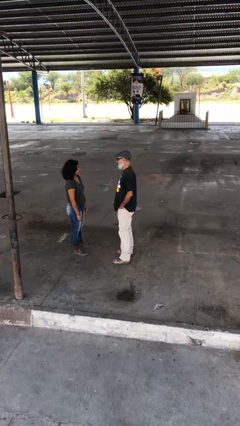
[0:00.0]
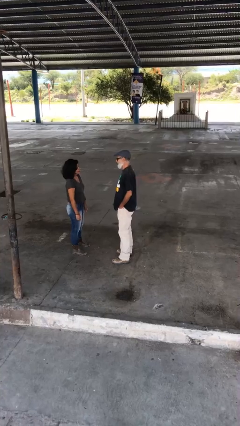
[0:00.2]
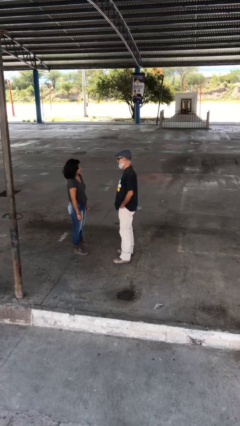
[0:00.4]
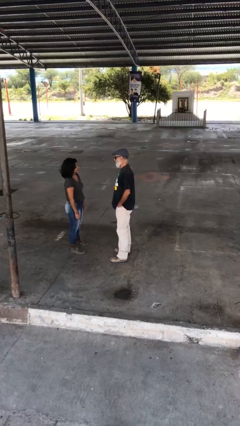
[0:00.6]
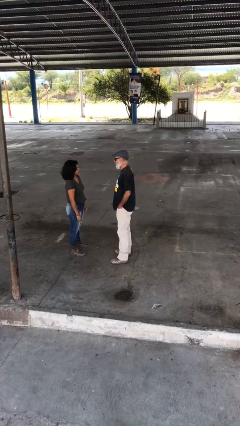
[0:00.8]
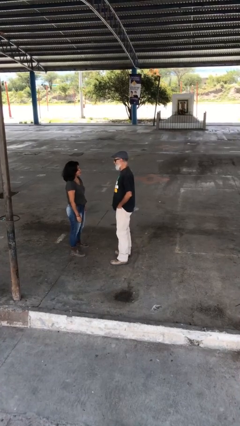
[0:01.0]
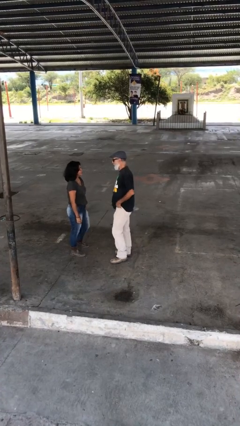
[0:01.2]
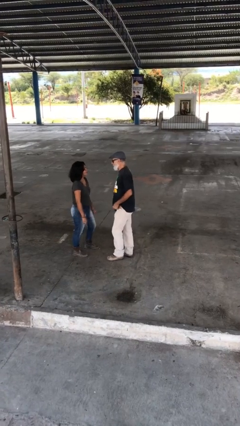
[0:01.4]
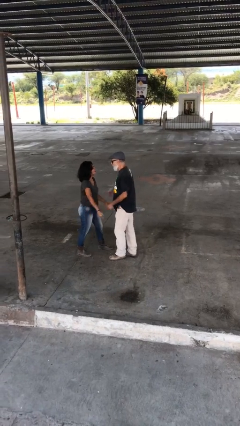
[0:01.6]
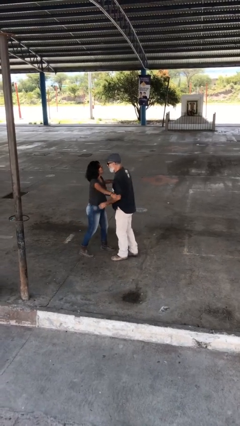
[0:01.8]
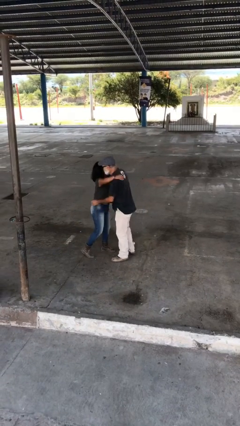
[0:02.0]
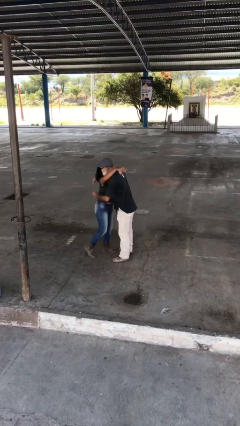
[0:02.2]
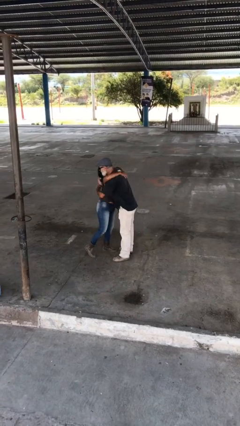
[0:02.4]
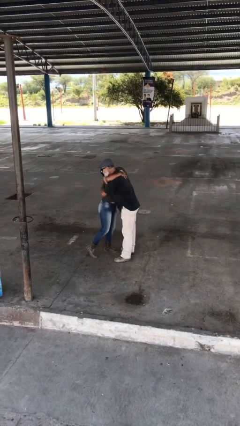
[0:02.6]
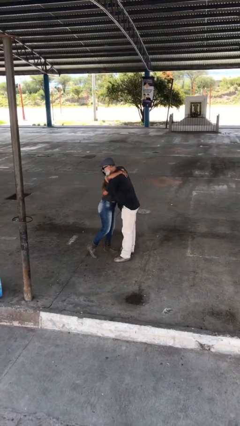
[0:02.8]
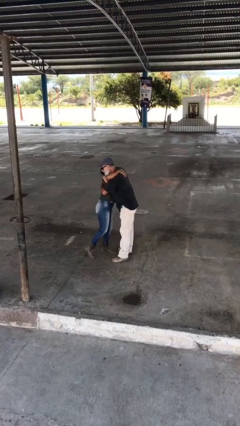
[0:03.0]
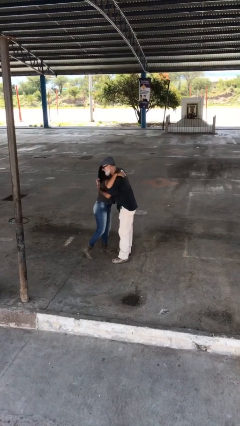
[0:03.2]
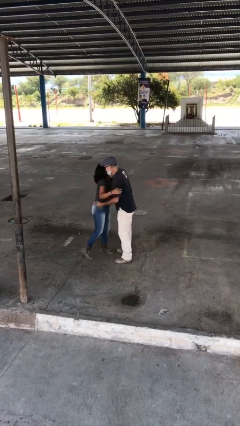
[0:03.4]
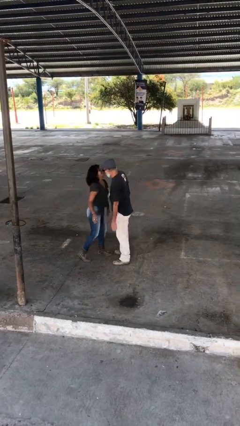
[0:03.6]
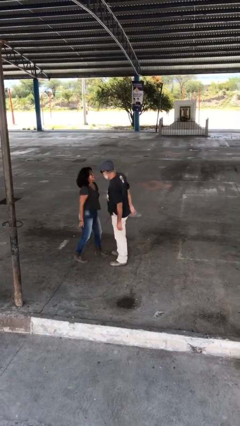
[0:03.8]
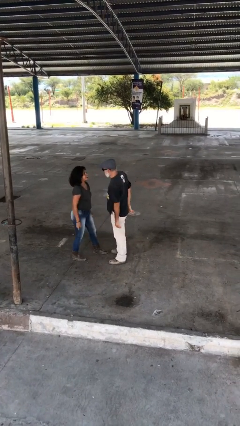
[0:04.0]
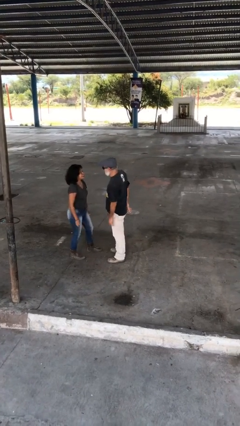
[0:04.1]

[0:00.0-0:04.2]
person embraces person

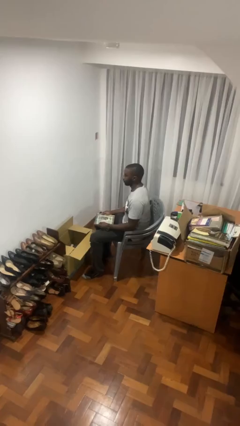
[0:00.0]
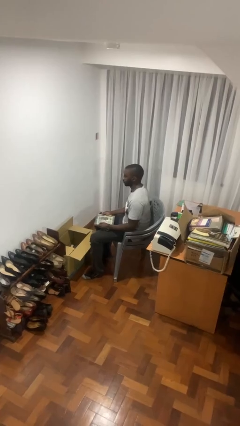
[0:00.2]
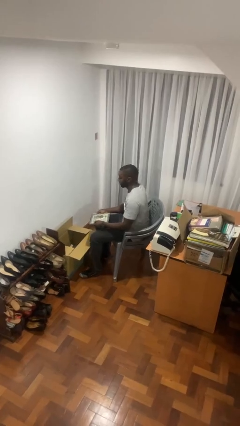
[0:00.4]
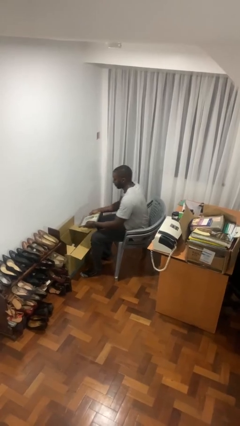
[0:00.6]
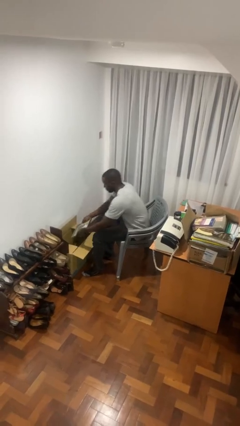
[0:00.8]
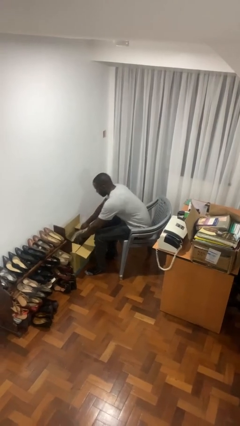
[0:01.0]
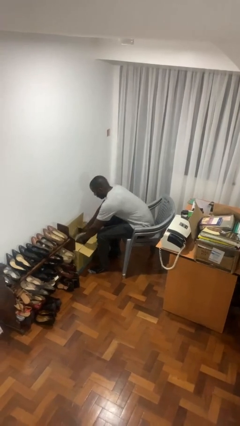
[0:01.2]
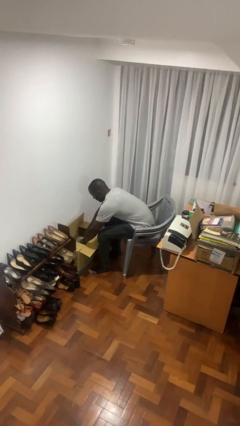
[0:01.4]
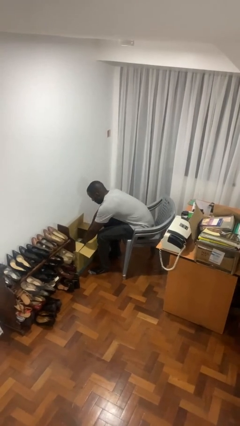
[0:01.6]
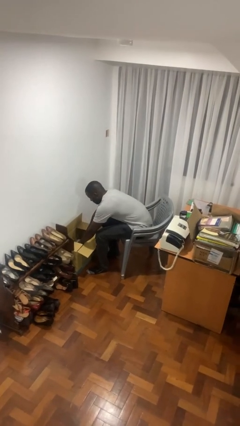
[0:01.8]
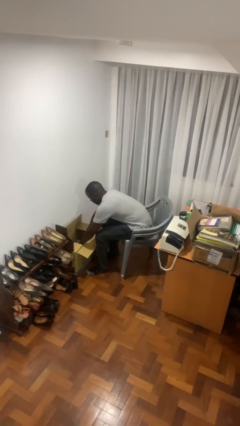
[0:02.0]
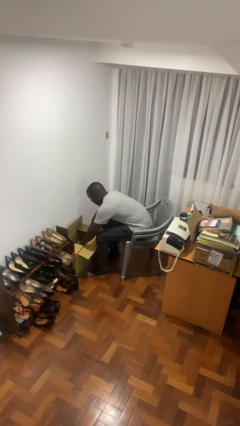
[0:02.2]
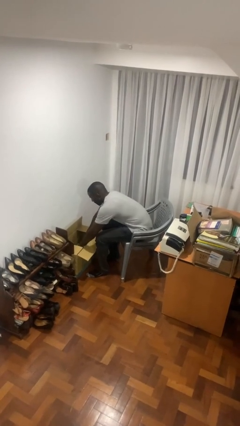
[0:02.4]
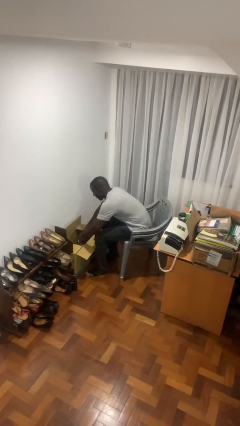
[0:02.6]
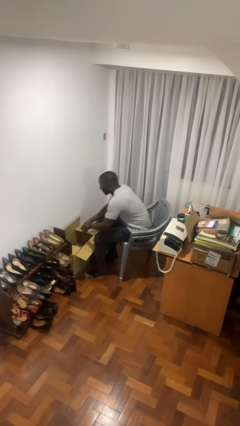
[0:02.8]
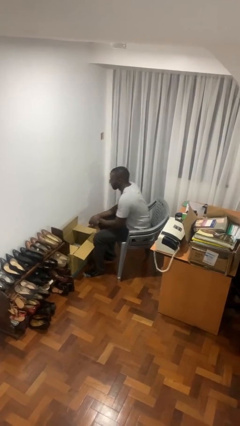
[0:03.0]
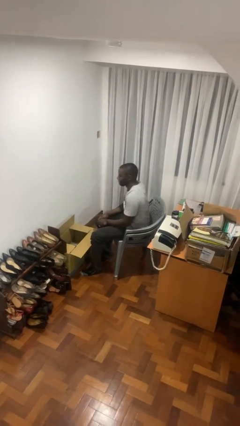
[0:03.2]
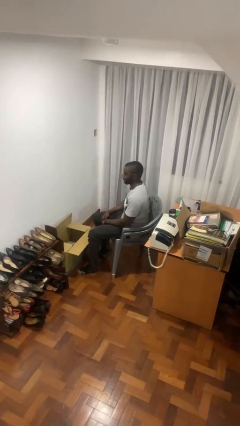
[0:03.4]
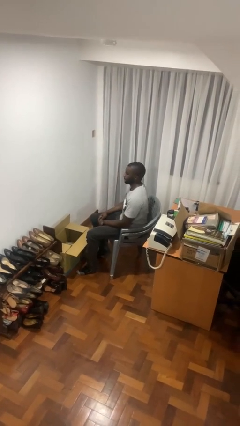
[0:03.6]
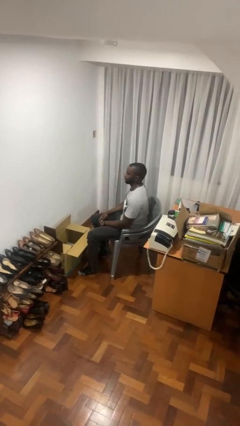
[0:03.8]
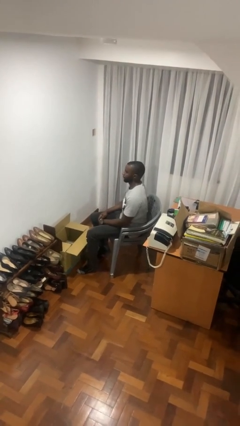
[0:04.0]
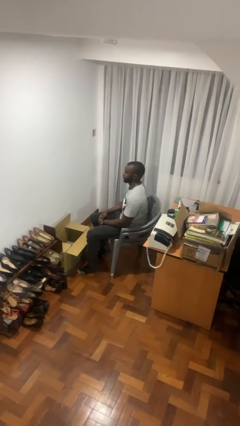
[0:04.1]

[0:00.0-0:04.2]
person puts object into box

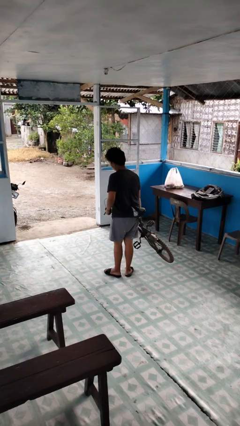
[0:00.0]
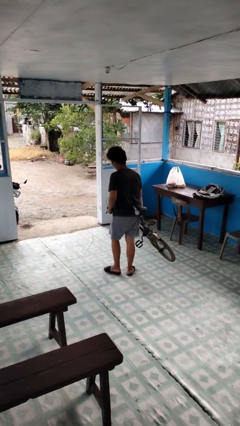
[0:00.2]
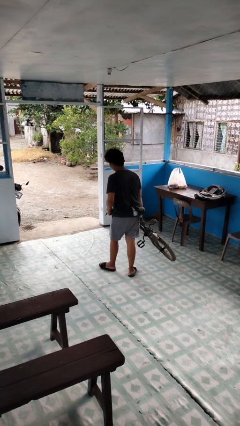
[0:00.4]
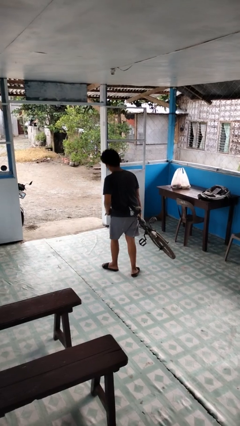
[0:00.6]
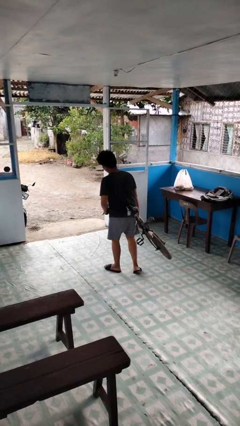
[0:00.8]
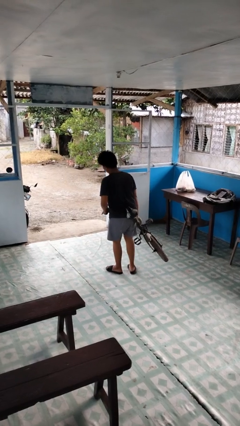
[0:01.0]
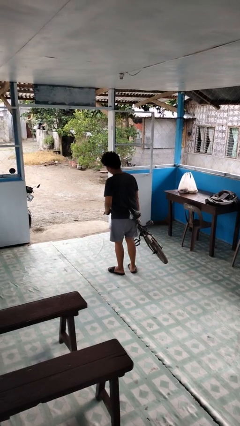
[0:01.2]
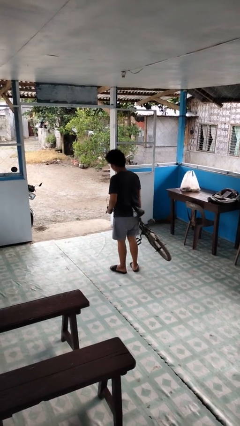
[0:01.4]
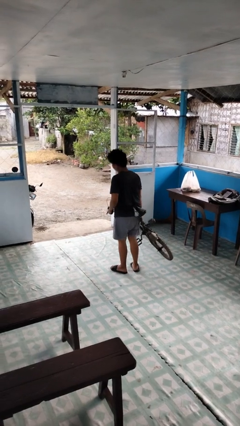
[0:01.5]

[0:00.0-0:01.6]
person carries bicycle

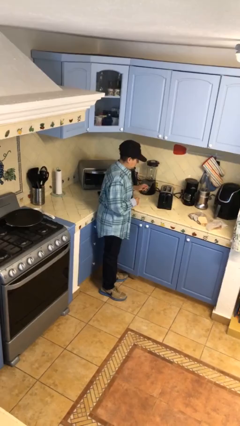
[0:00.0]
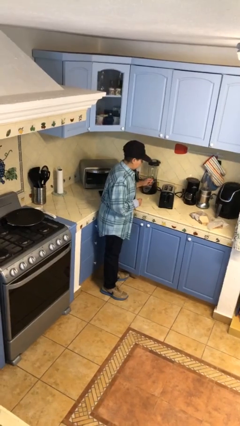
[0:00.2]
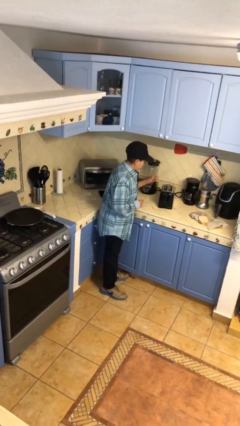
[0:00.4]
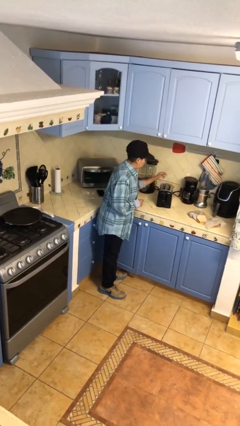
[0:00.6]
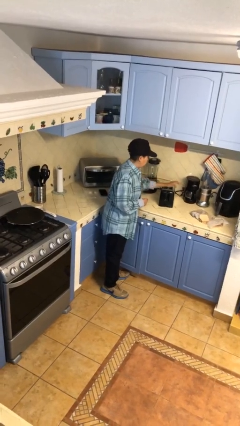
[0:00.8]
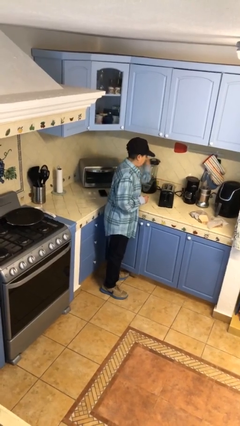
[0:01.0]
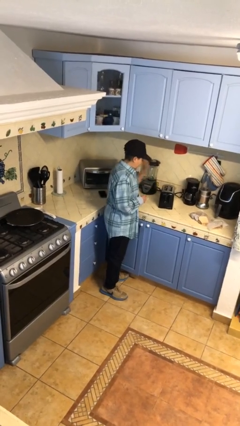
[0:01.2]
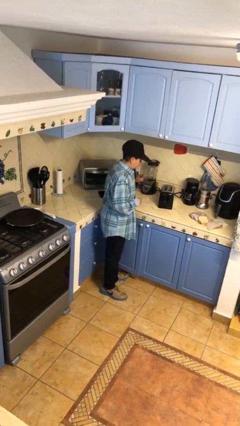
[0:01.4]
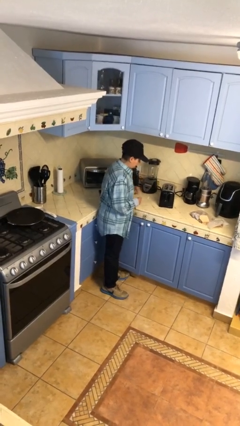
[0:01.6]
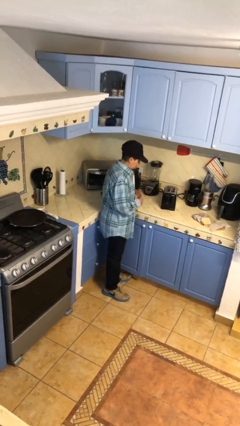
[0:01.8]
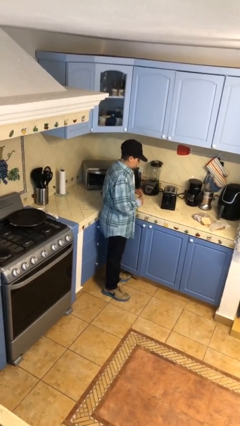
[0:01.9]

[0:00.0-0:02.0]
person burns hand

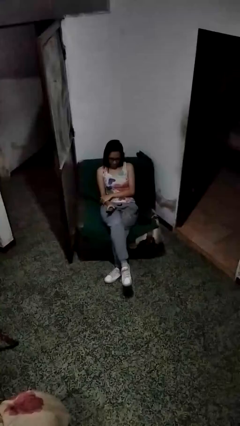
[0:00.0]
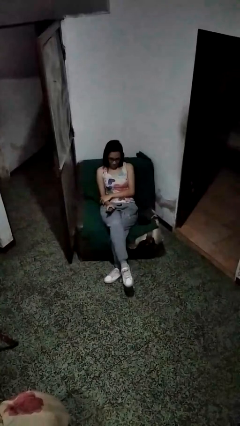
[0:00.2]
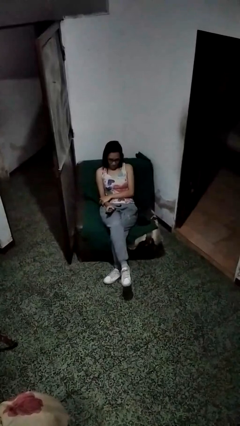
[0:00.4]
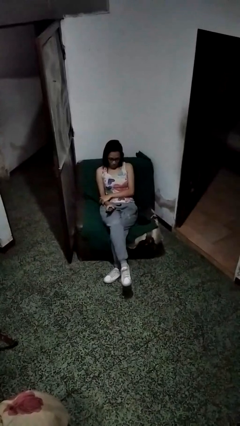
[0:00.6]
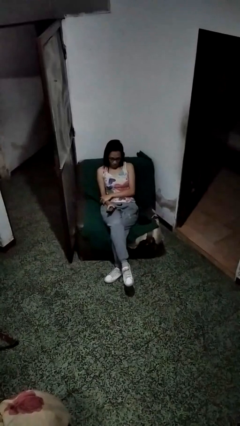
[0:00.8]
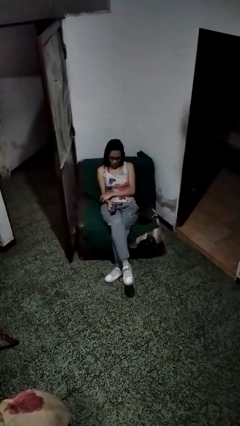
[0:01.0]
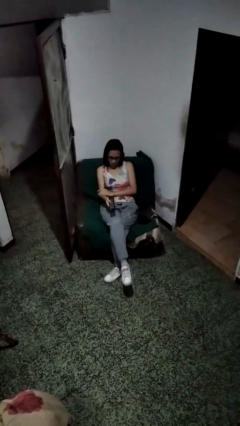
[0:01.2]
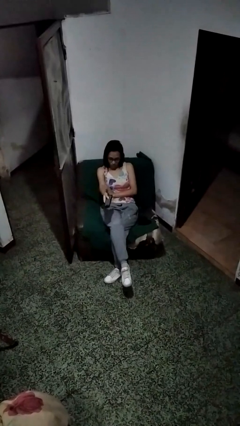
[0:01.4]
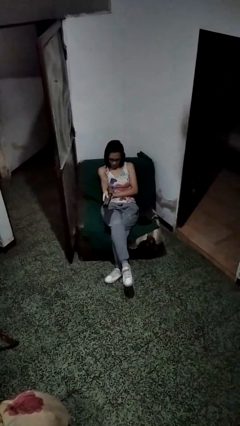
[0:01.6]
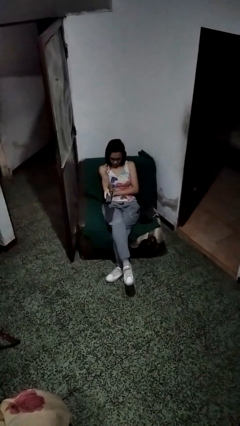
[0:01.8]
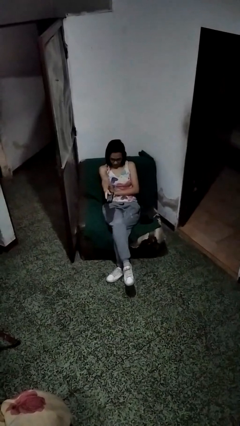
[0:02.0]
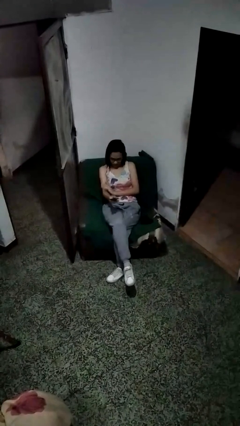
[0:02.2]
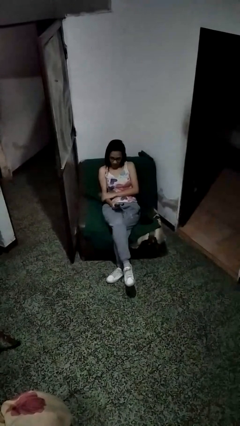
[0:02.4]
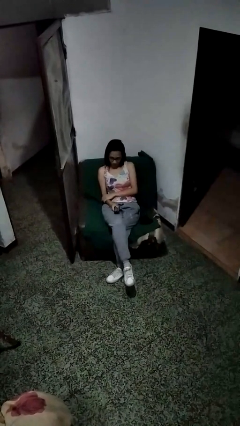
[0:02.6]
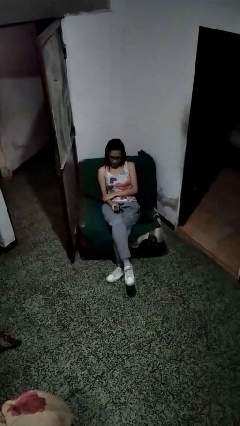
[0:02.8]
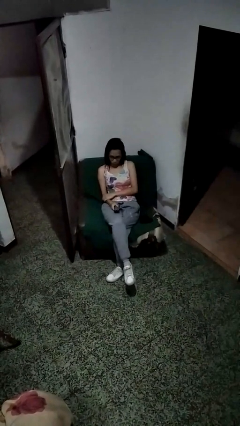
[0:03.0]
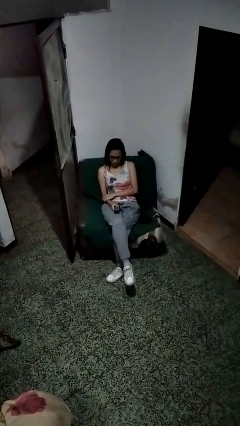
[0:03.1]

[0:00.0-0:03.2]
person uses television remote

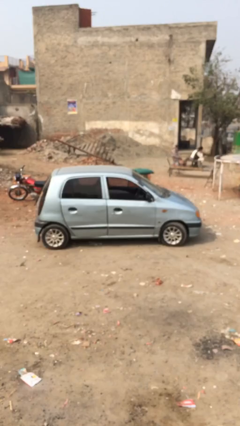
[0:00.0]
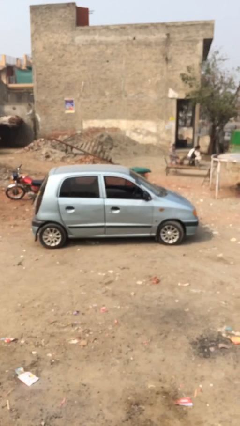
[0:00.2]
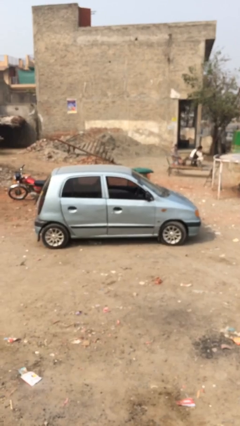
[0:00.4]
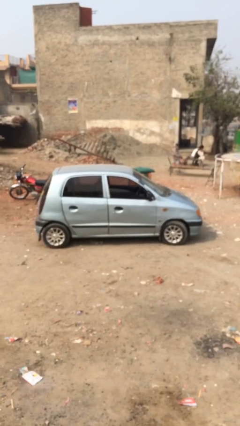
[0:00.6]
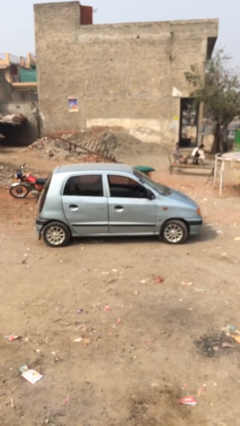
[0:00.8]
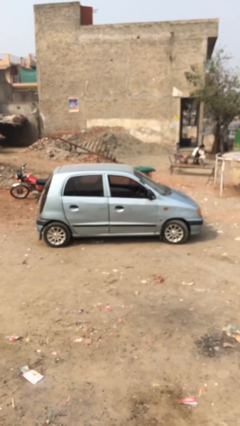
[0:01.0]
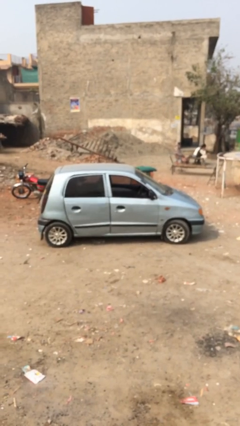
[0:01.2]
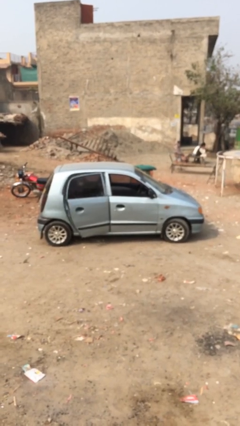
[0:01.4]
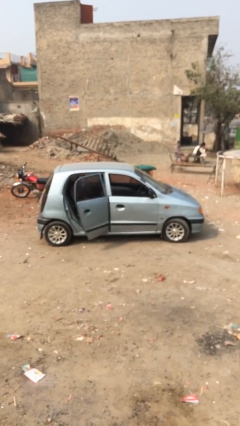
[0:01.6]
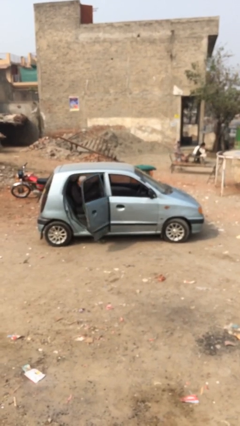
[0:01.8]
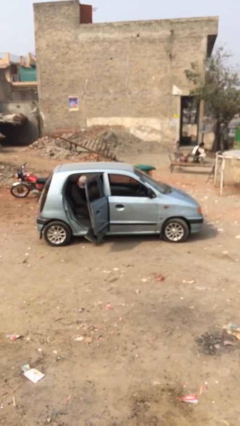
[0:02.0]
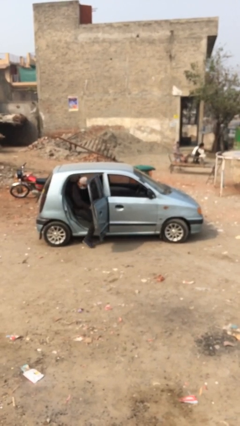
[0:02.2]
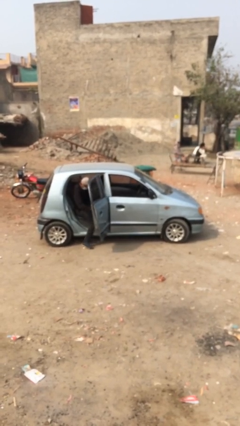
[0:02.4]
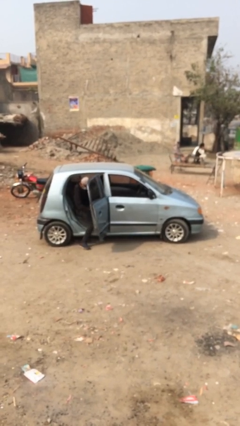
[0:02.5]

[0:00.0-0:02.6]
car drops off person
